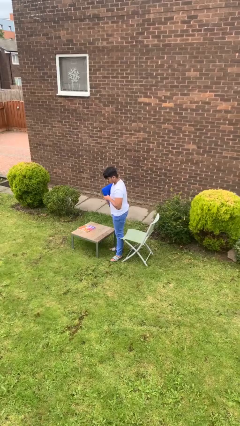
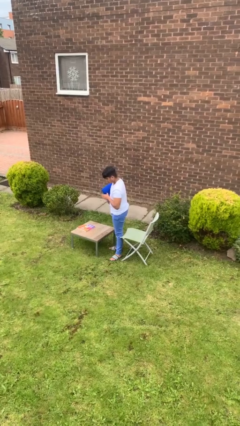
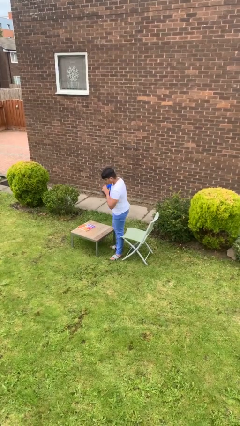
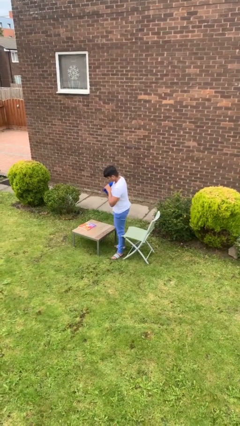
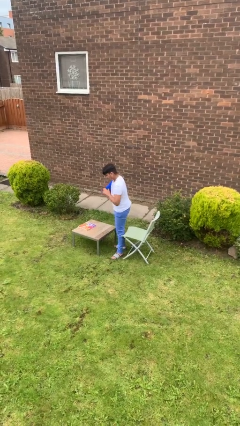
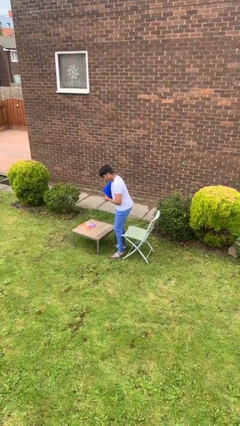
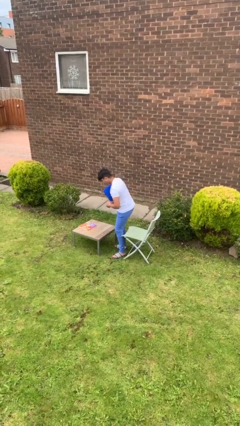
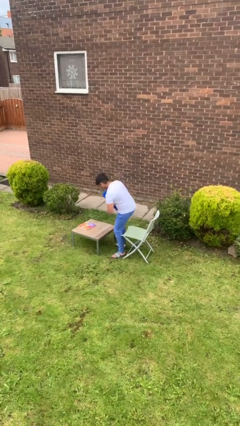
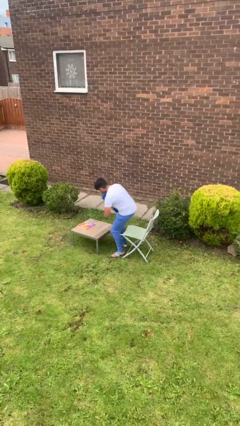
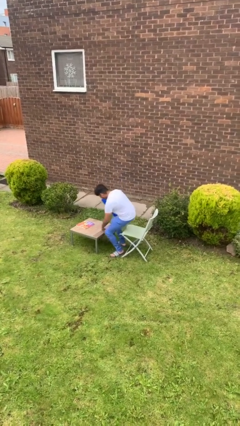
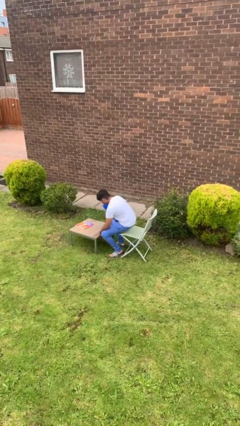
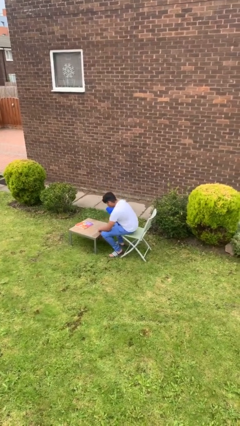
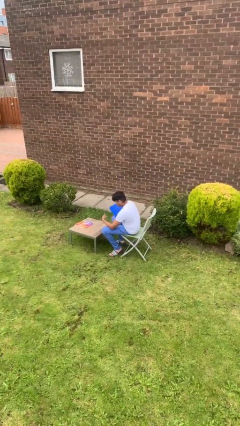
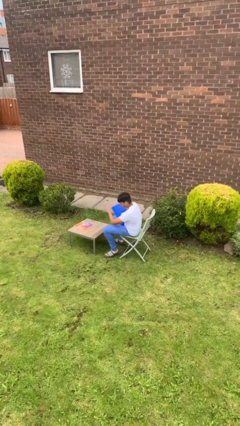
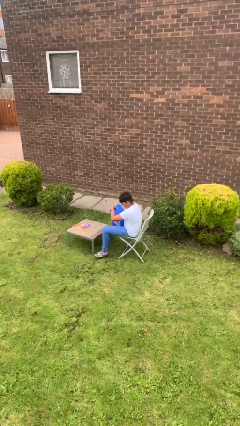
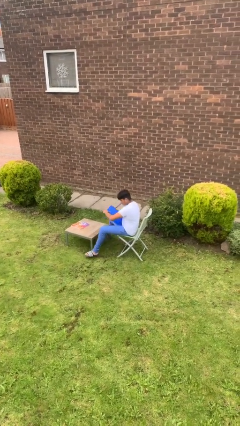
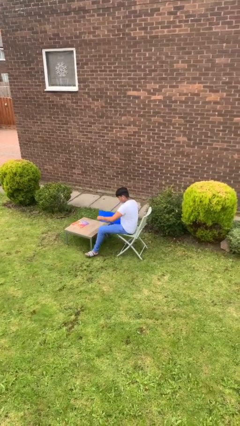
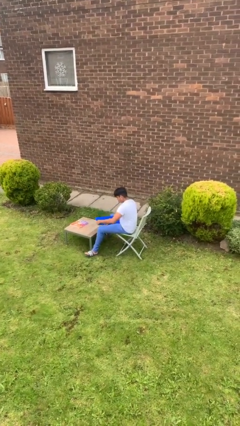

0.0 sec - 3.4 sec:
person sits down

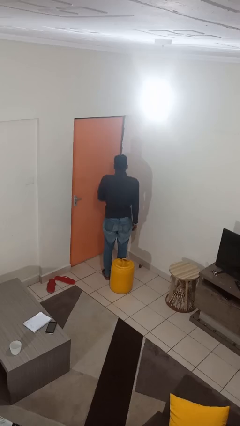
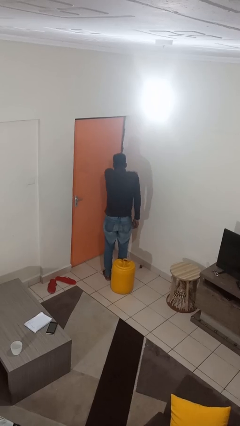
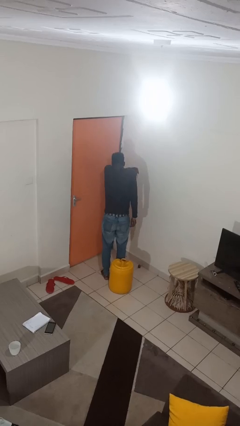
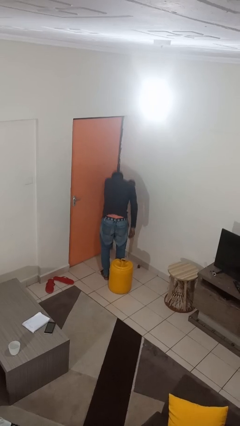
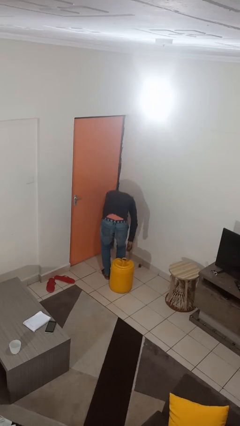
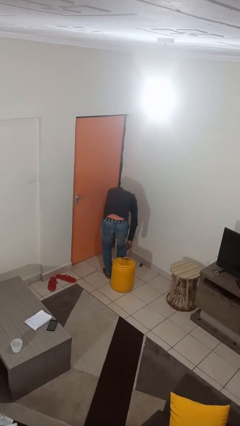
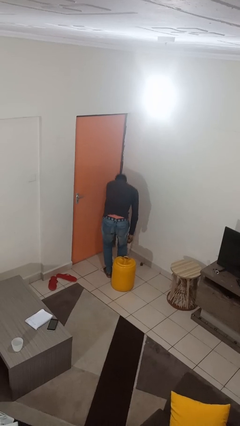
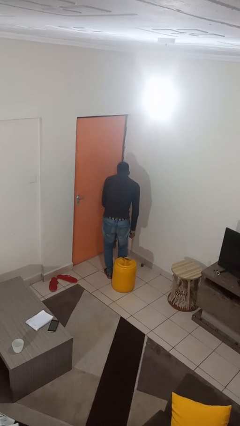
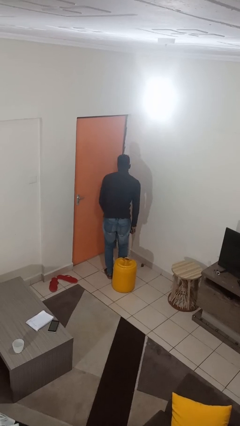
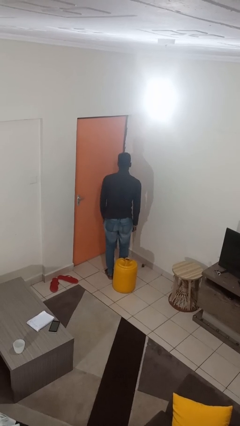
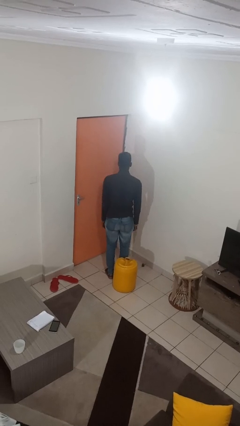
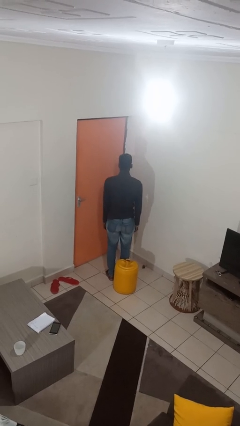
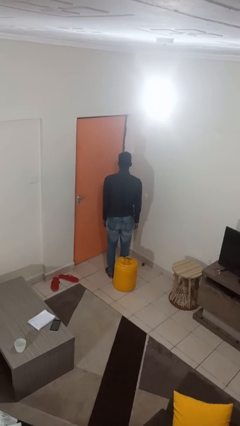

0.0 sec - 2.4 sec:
person sneezes into arm

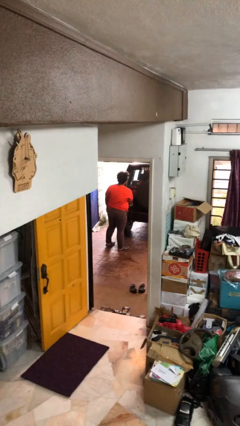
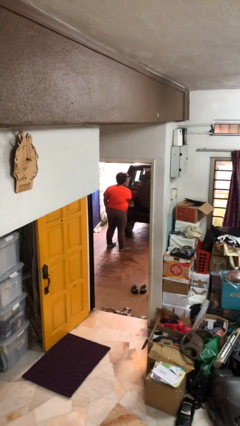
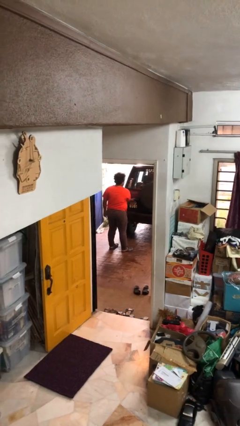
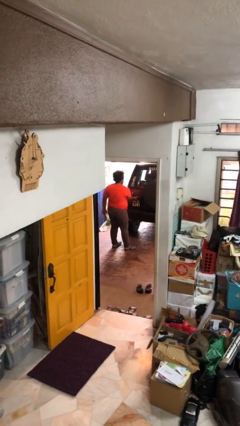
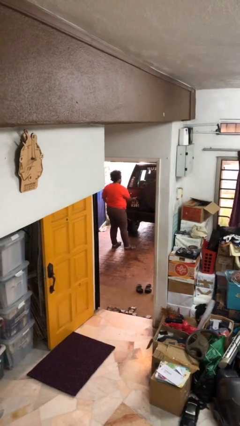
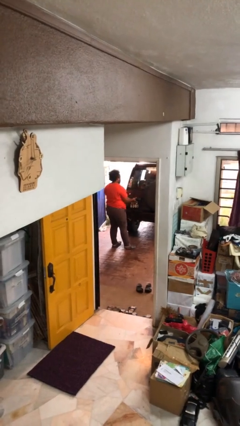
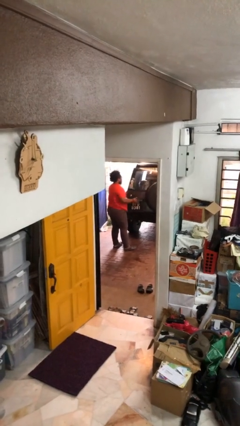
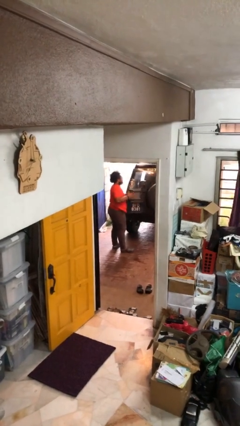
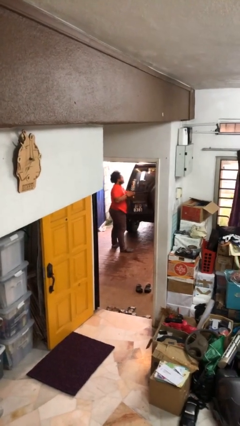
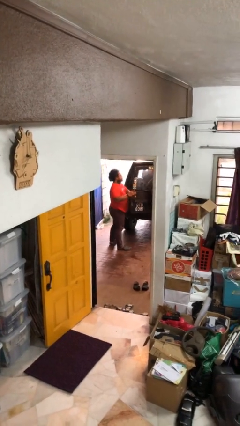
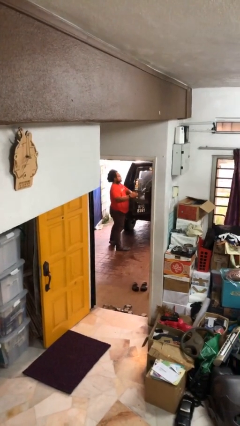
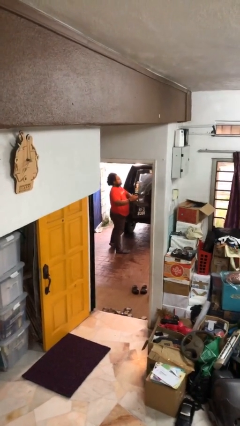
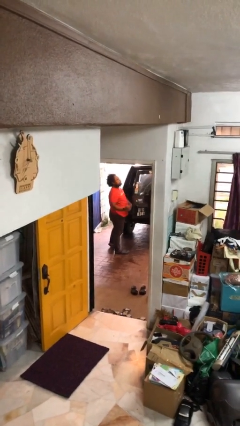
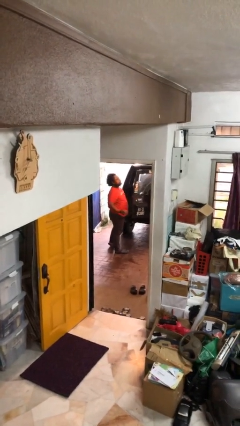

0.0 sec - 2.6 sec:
person opens car trunk

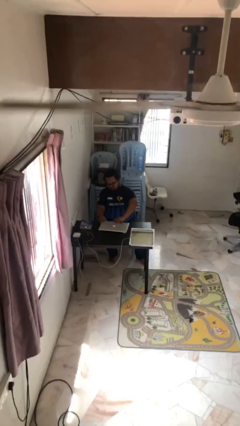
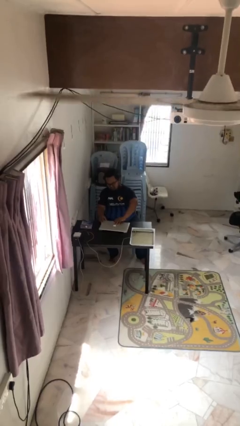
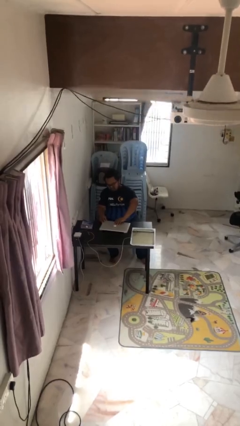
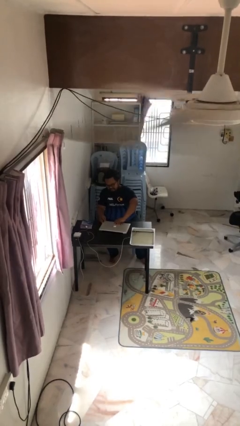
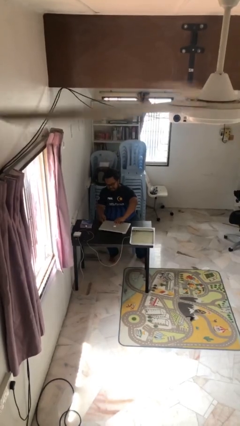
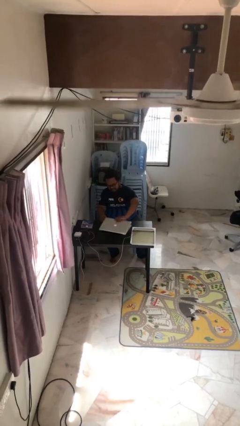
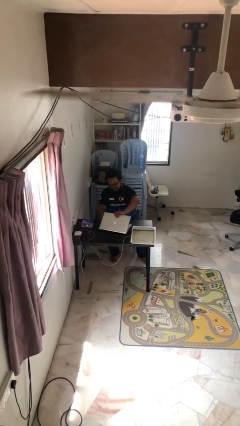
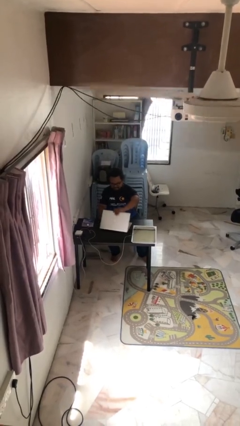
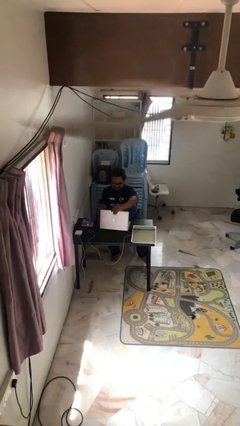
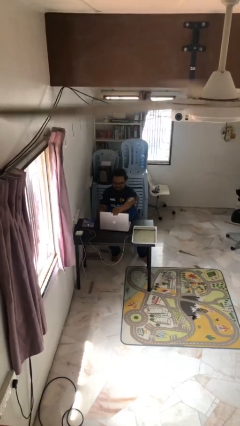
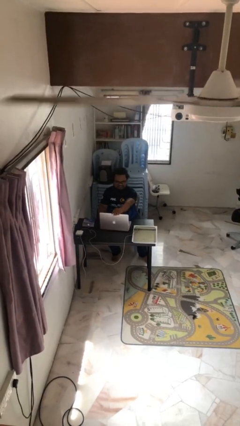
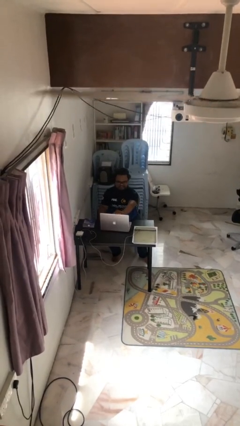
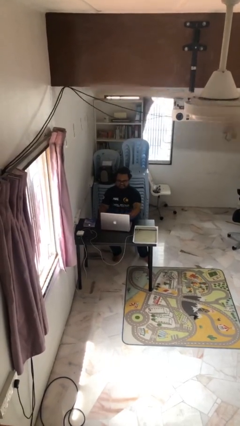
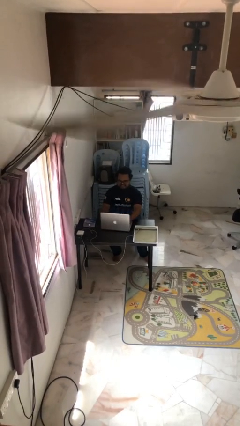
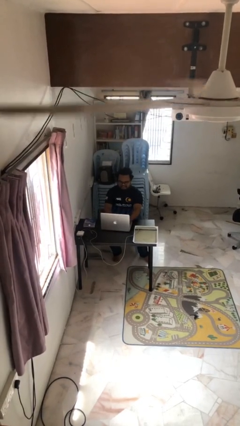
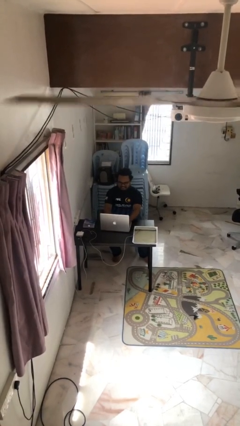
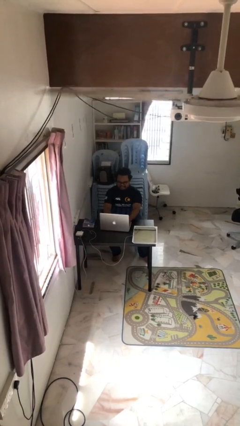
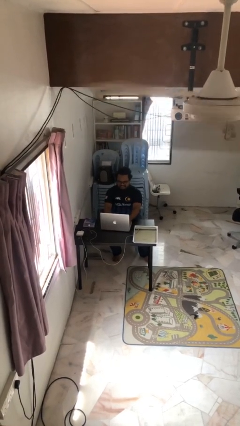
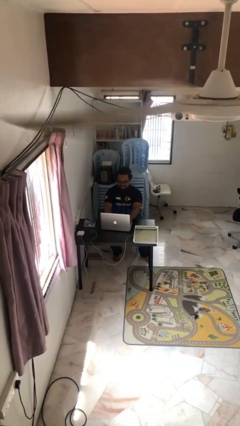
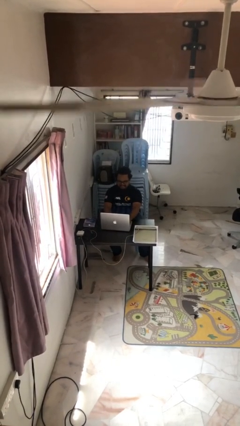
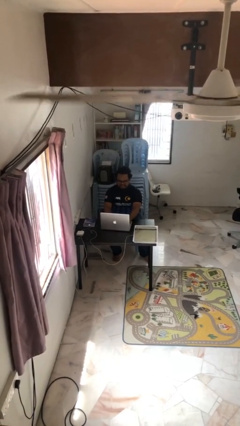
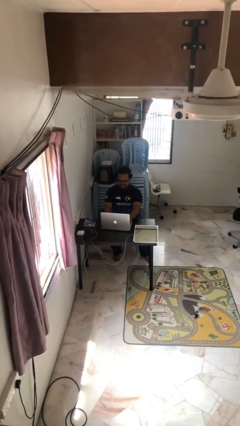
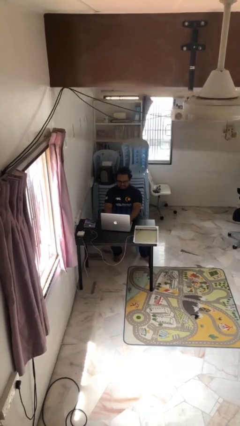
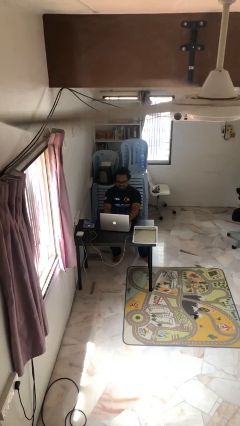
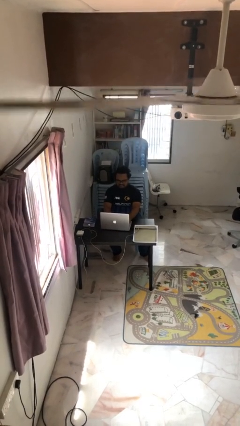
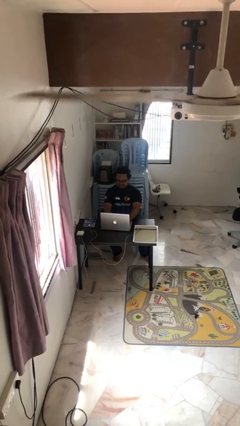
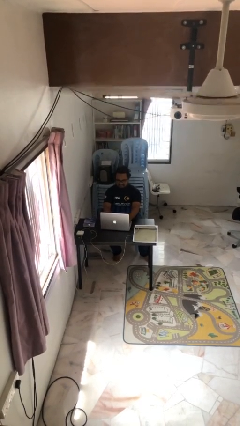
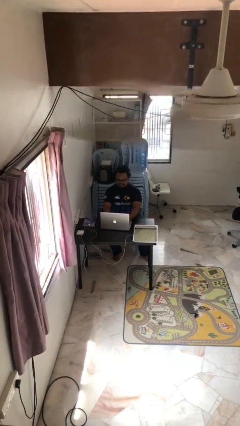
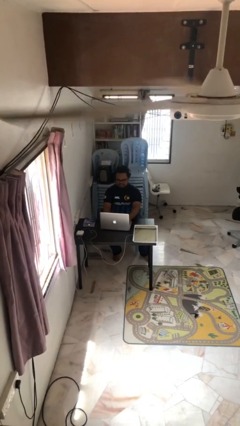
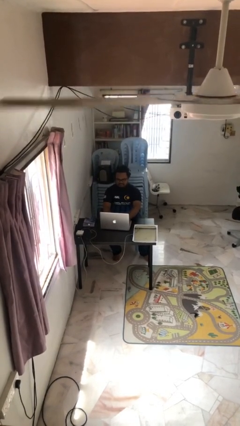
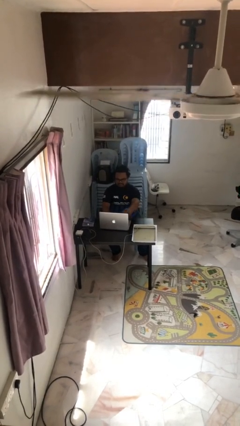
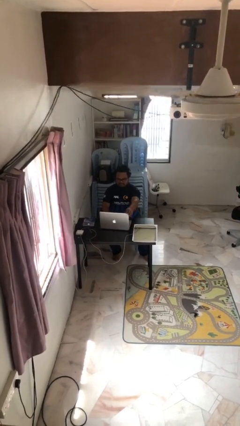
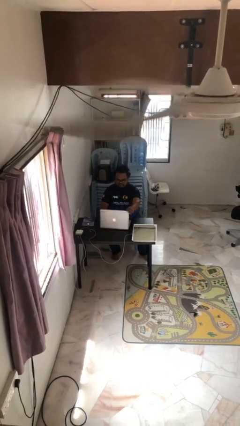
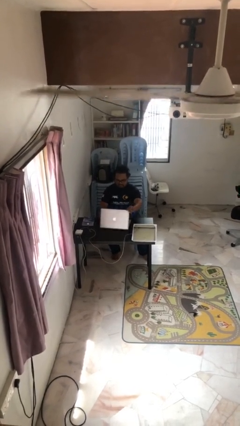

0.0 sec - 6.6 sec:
person interacts with laptop

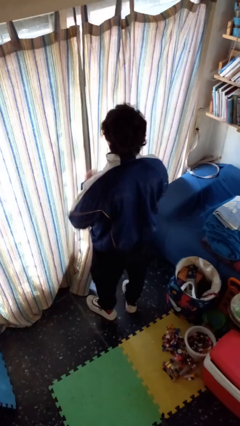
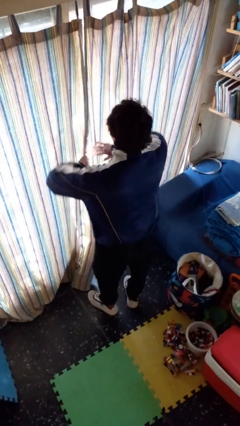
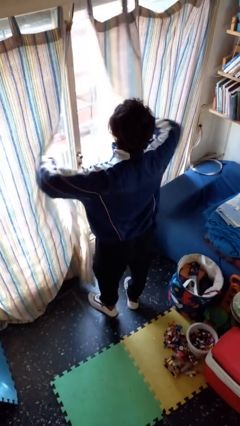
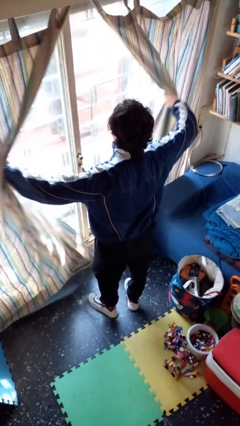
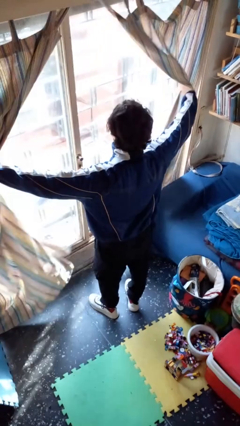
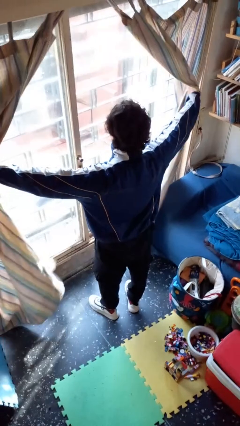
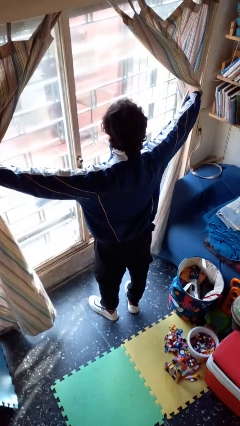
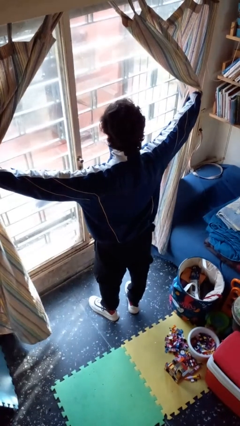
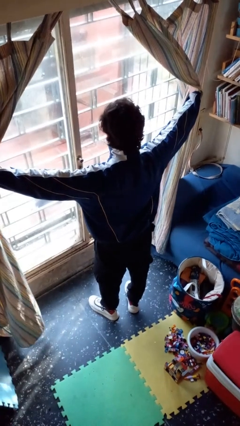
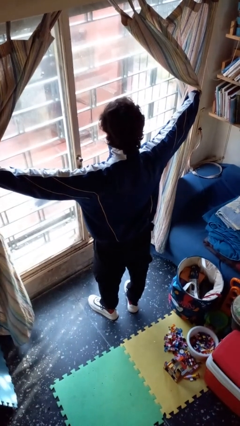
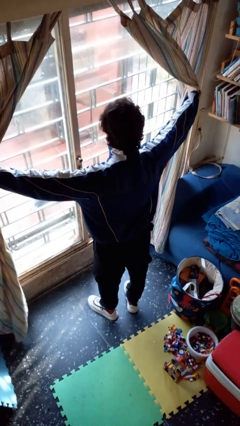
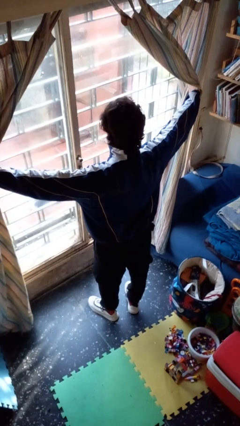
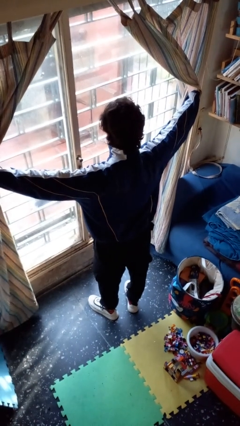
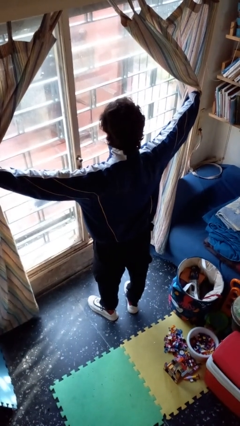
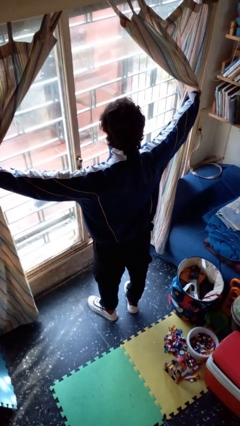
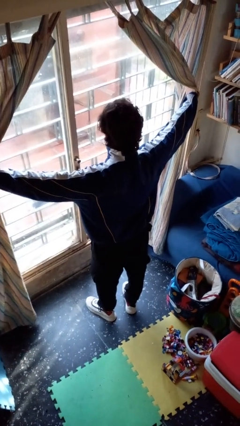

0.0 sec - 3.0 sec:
person opens curtains
